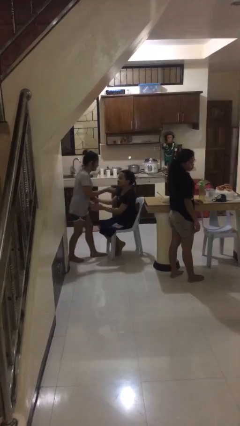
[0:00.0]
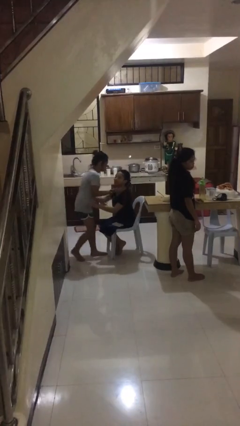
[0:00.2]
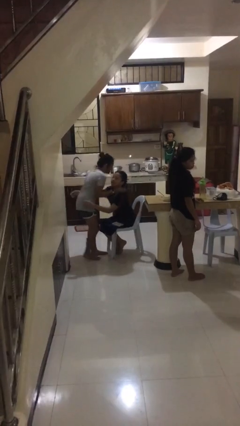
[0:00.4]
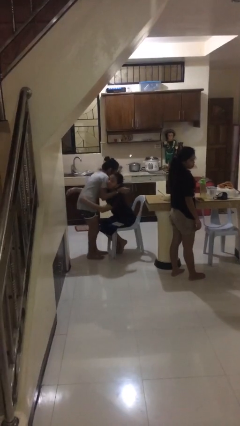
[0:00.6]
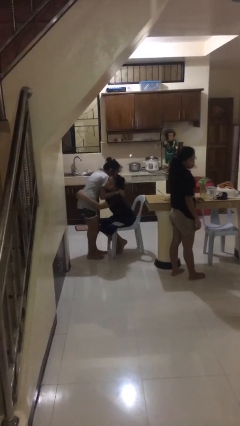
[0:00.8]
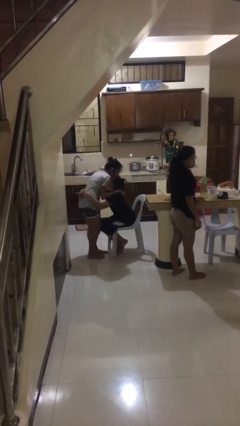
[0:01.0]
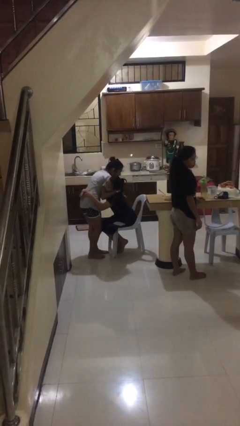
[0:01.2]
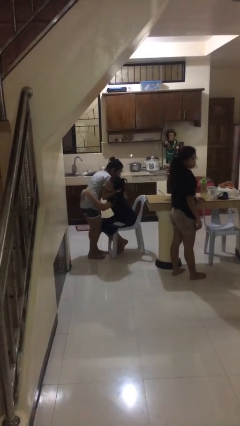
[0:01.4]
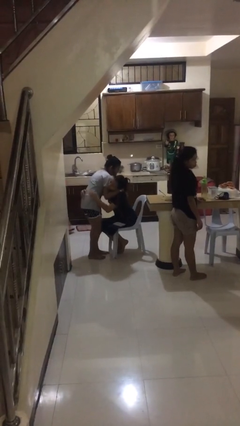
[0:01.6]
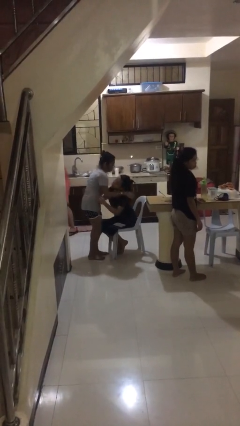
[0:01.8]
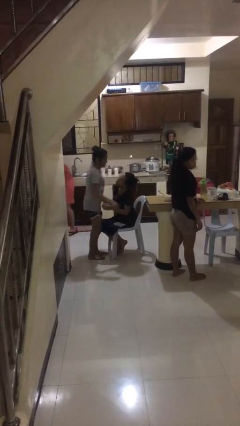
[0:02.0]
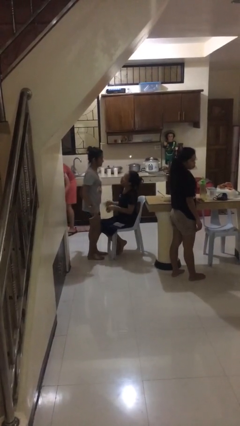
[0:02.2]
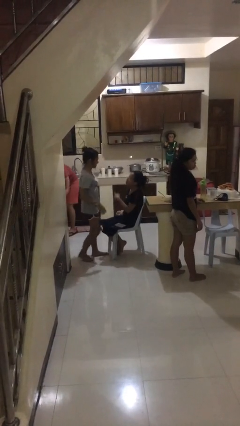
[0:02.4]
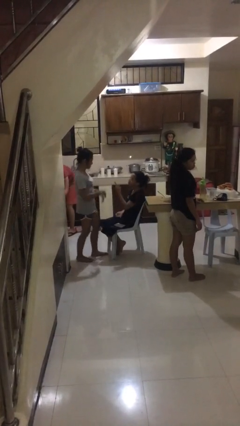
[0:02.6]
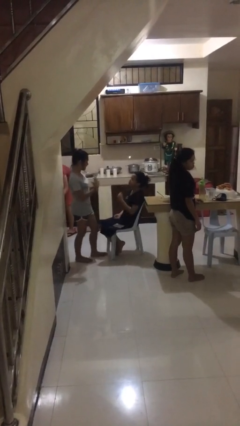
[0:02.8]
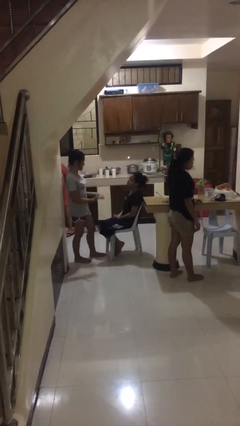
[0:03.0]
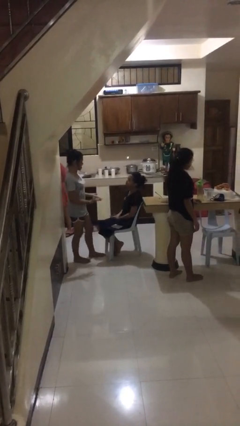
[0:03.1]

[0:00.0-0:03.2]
person embraces person

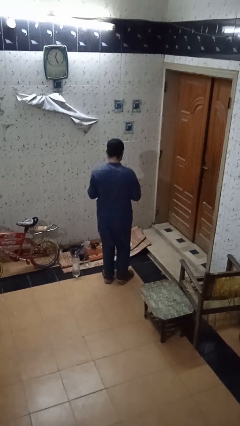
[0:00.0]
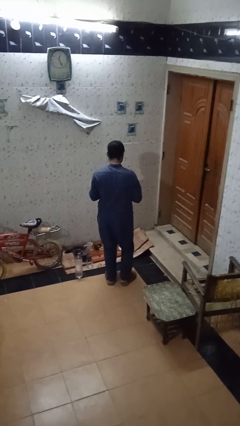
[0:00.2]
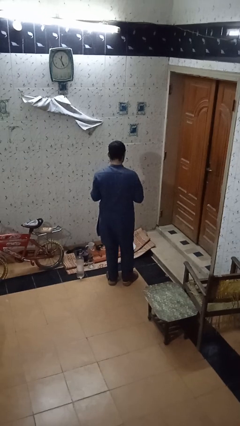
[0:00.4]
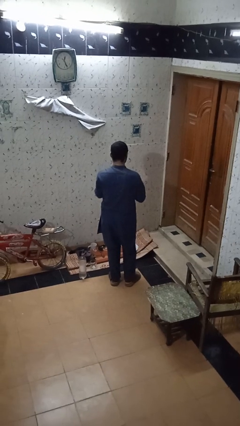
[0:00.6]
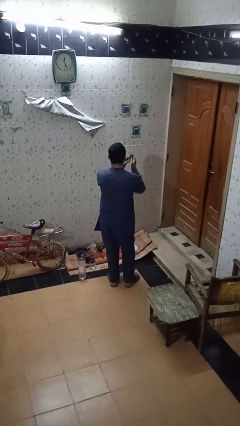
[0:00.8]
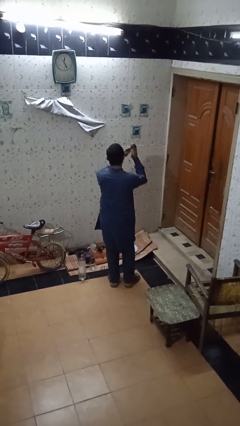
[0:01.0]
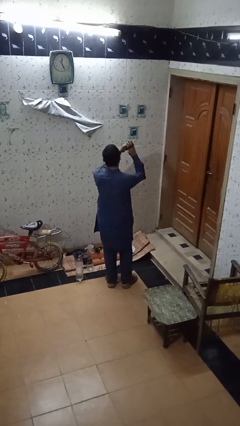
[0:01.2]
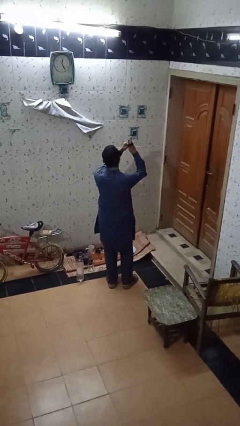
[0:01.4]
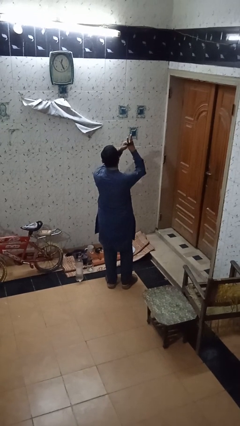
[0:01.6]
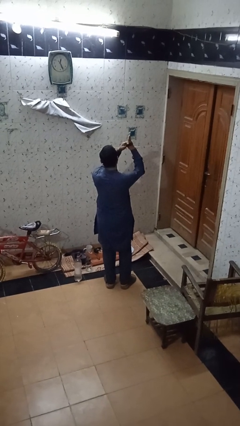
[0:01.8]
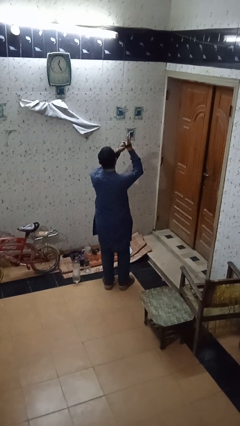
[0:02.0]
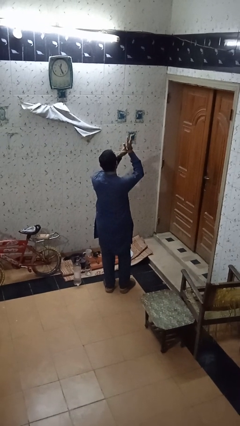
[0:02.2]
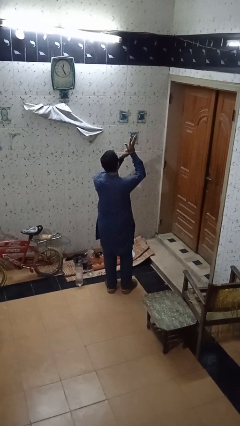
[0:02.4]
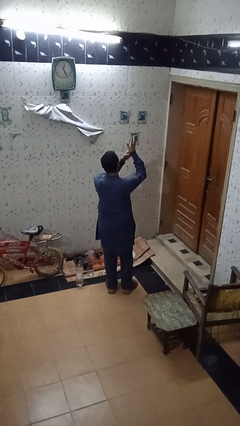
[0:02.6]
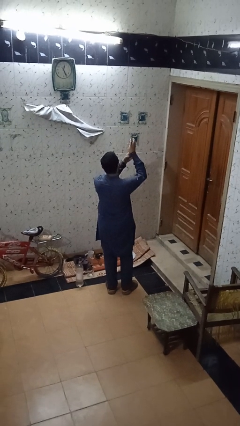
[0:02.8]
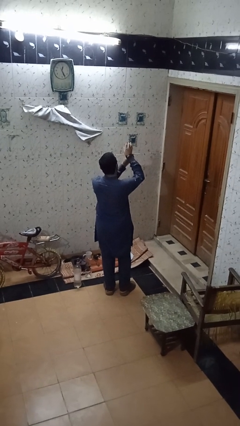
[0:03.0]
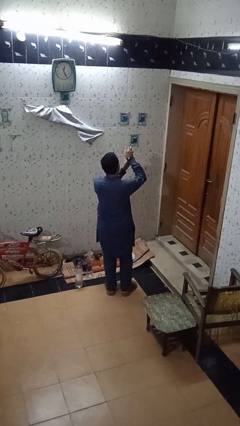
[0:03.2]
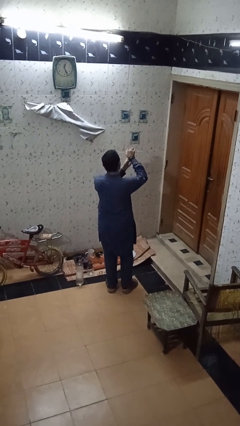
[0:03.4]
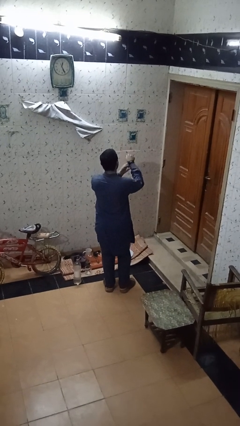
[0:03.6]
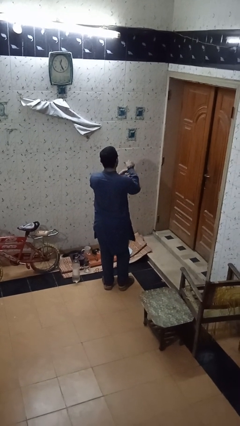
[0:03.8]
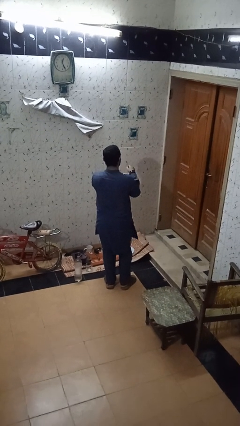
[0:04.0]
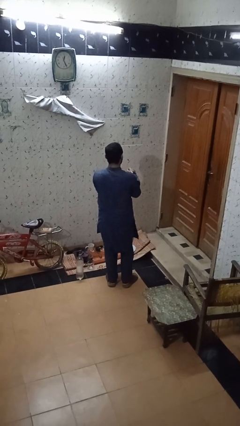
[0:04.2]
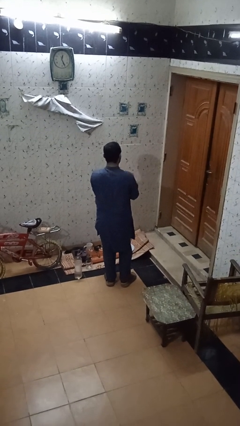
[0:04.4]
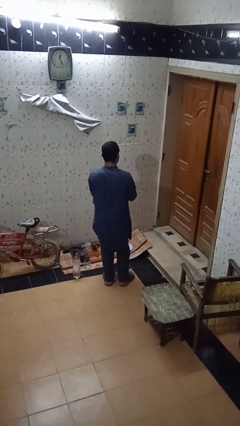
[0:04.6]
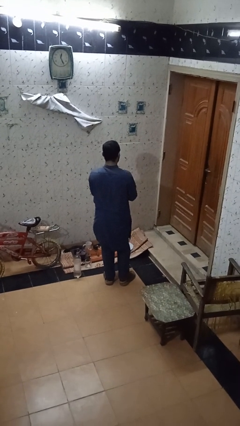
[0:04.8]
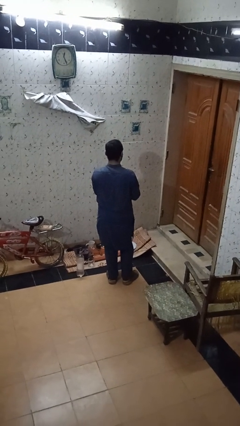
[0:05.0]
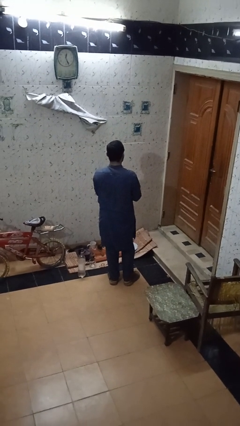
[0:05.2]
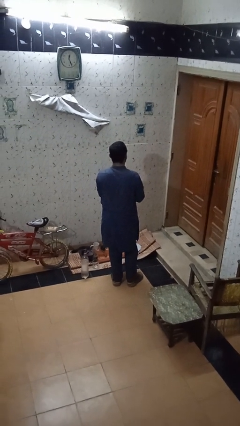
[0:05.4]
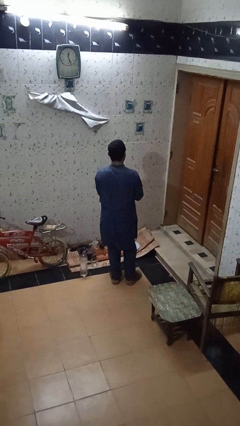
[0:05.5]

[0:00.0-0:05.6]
person puts on wristwatch

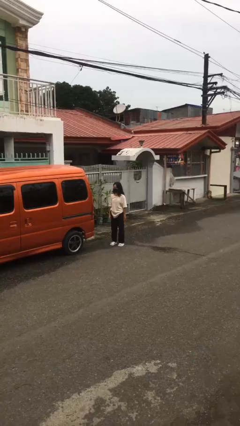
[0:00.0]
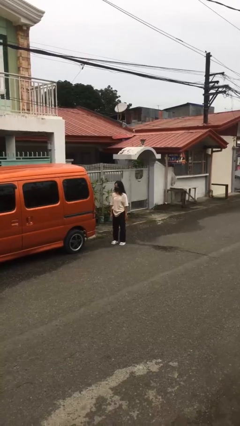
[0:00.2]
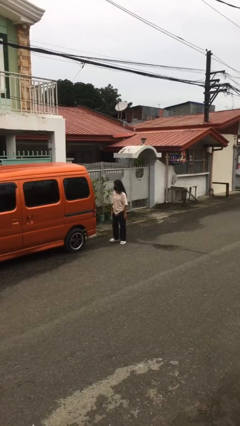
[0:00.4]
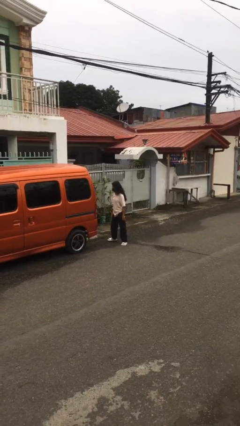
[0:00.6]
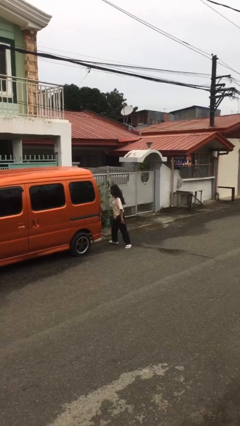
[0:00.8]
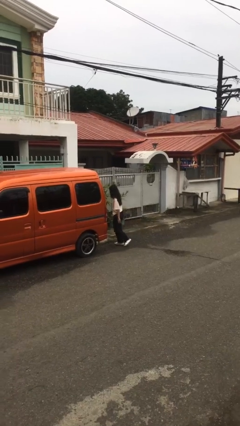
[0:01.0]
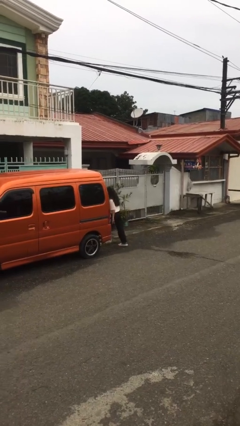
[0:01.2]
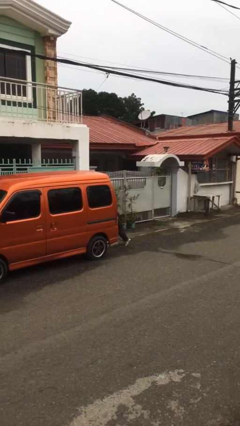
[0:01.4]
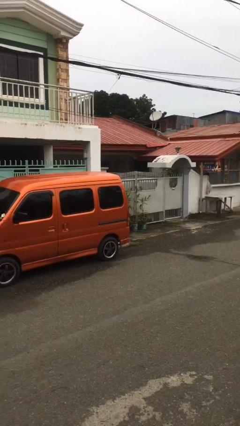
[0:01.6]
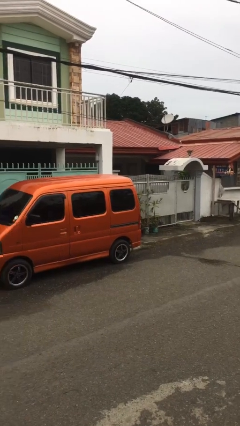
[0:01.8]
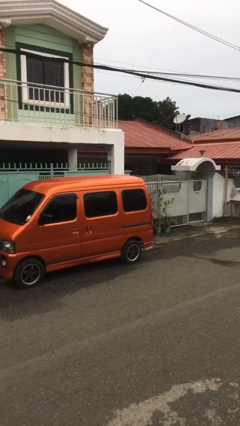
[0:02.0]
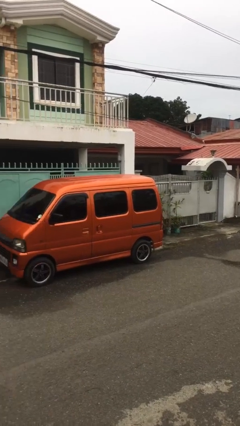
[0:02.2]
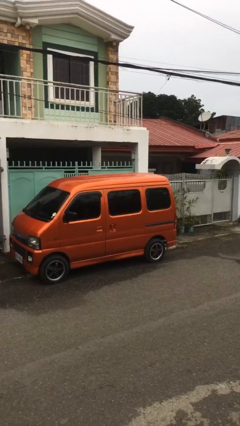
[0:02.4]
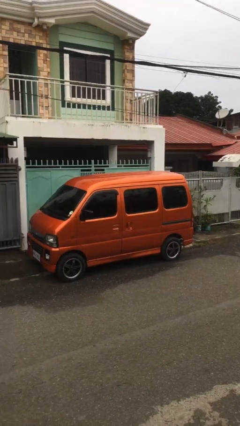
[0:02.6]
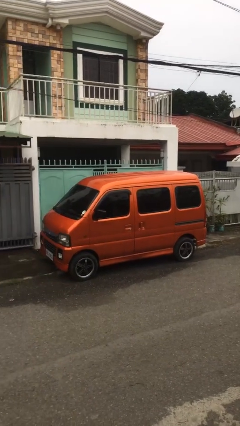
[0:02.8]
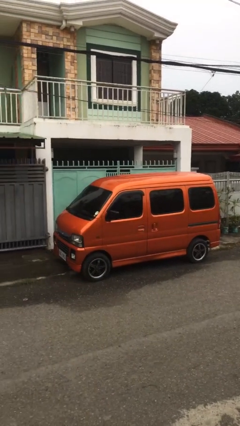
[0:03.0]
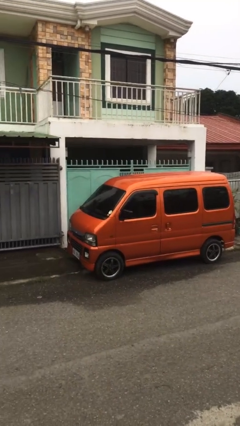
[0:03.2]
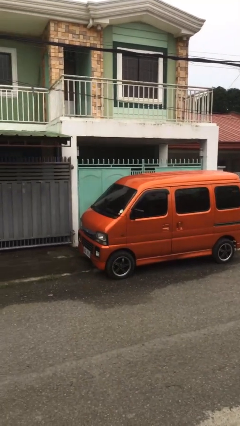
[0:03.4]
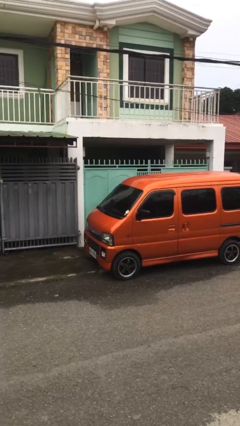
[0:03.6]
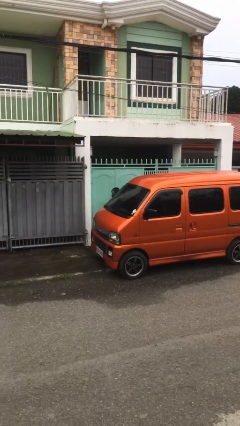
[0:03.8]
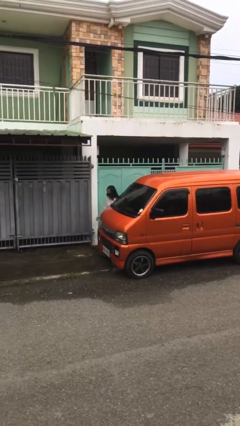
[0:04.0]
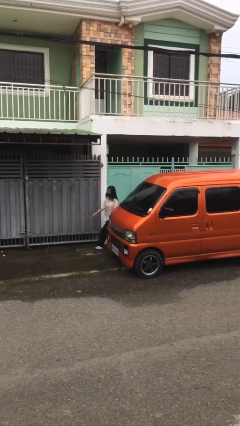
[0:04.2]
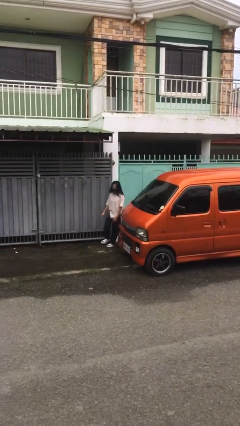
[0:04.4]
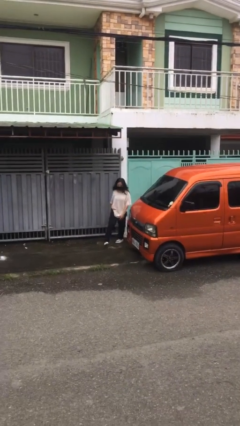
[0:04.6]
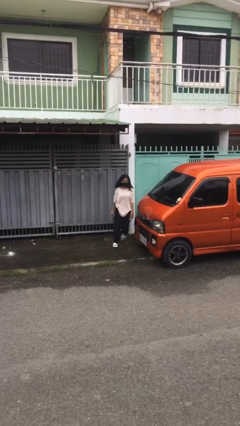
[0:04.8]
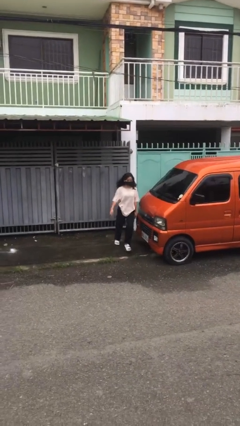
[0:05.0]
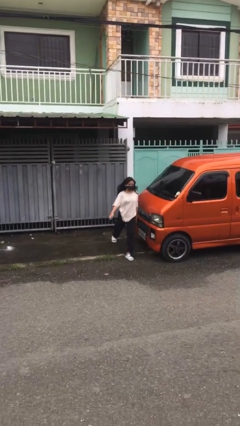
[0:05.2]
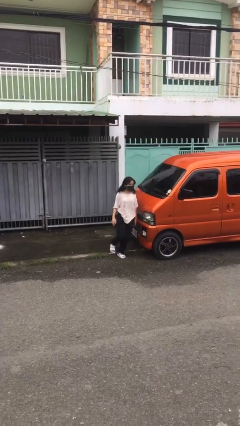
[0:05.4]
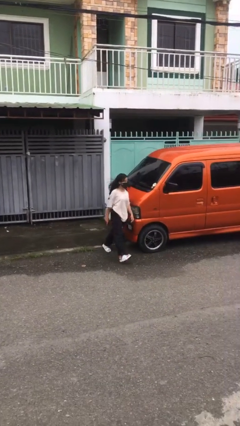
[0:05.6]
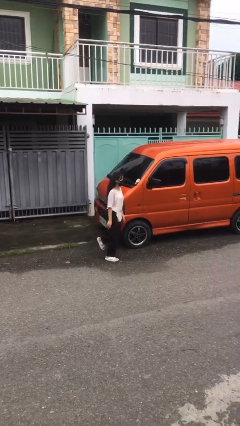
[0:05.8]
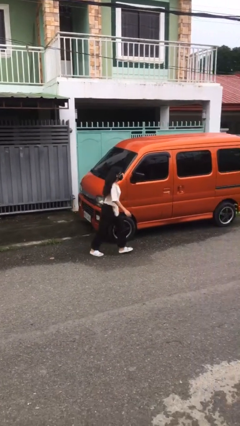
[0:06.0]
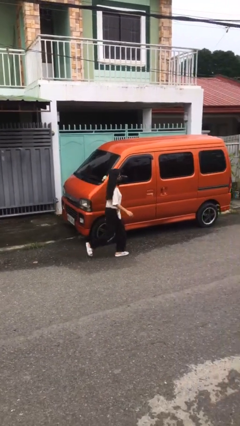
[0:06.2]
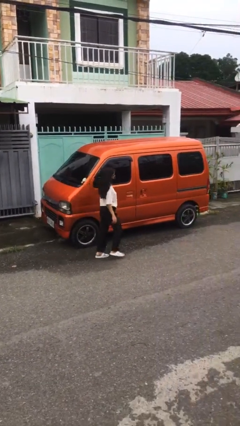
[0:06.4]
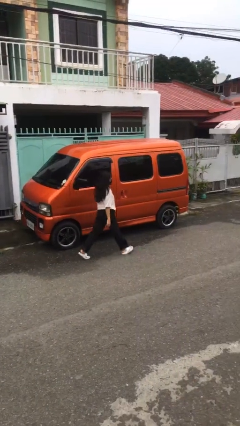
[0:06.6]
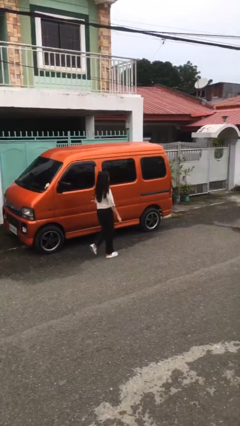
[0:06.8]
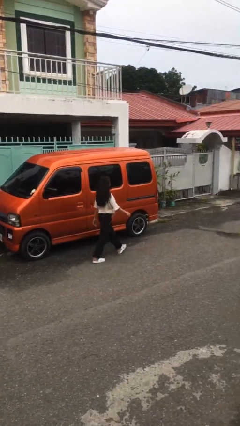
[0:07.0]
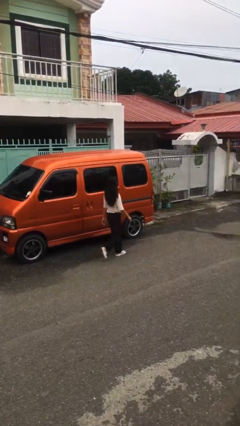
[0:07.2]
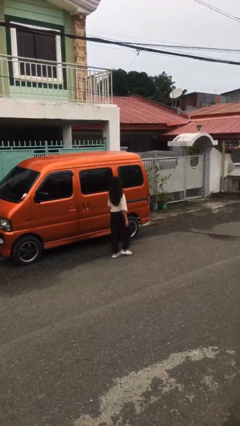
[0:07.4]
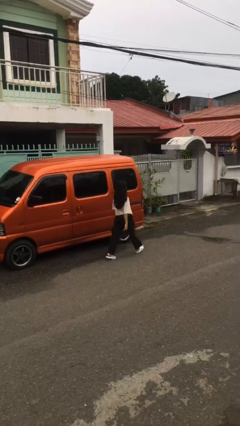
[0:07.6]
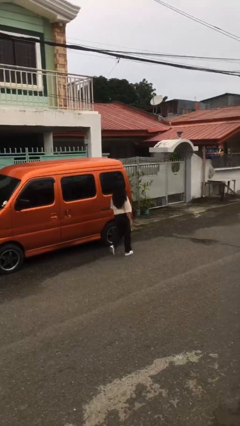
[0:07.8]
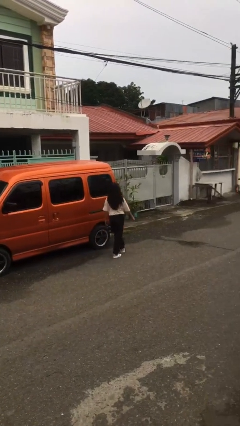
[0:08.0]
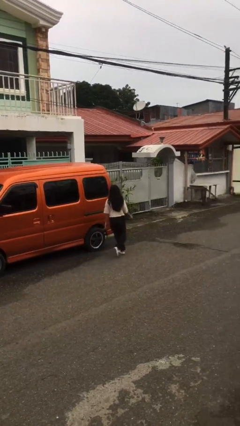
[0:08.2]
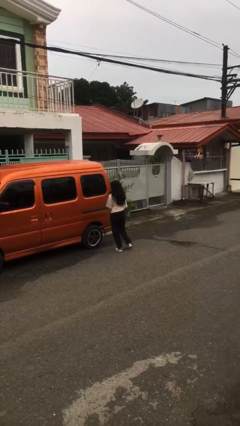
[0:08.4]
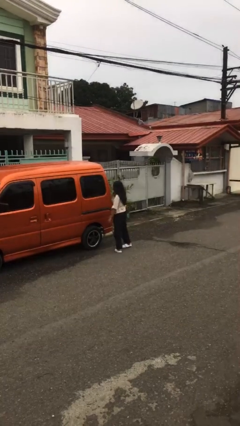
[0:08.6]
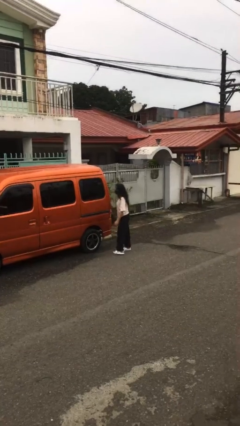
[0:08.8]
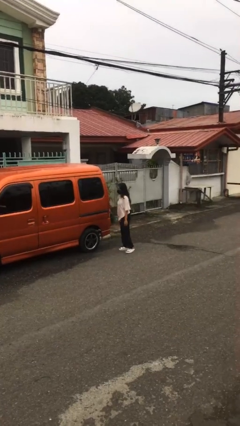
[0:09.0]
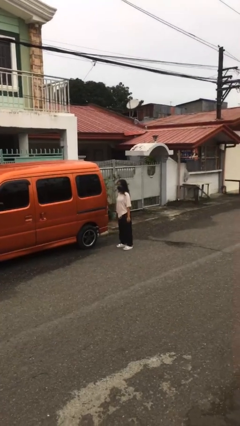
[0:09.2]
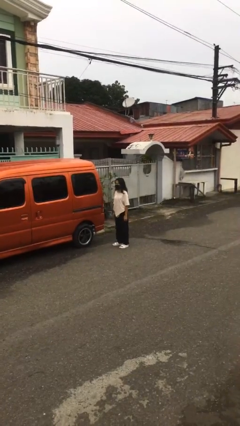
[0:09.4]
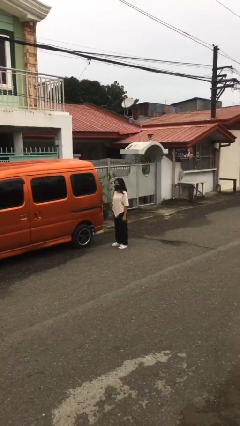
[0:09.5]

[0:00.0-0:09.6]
person walks around car
